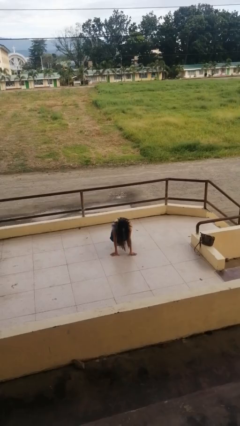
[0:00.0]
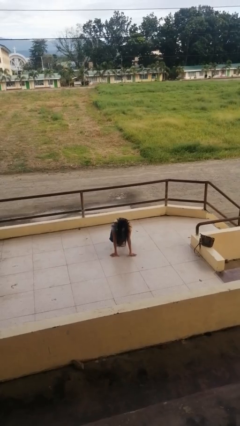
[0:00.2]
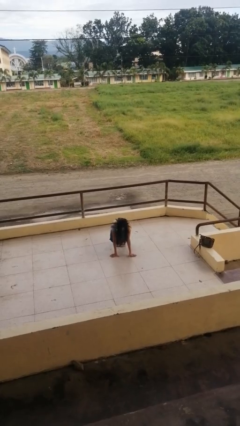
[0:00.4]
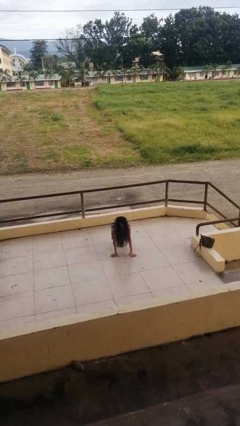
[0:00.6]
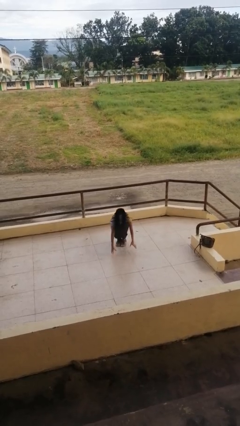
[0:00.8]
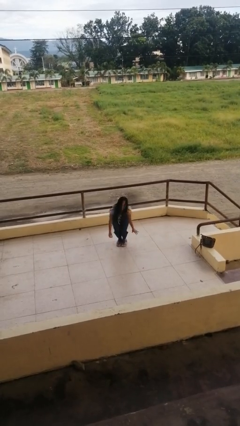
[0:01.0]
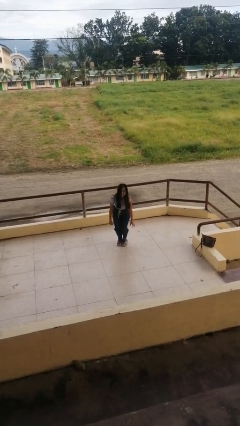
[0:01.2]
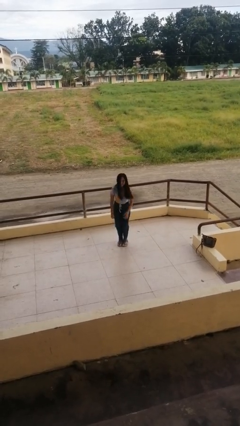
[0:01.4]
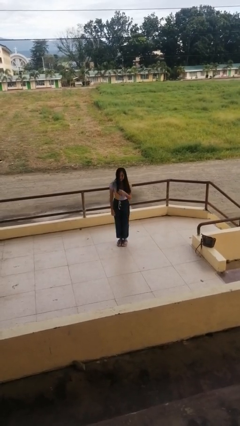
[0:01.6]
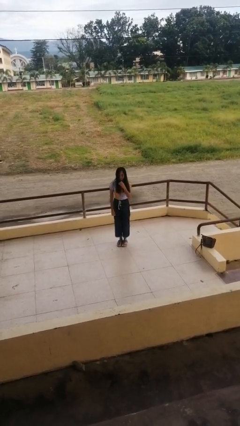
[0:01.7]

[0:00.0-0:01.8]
person stands up from floor

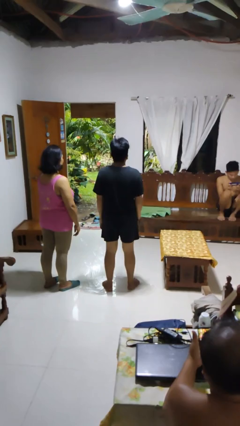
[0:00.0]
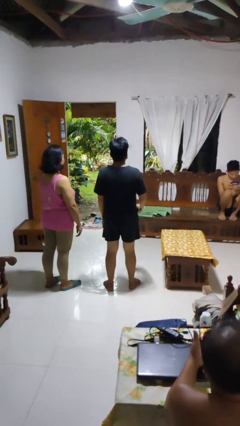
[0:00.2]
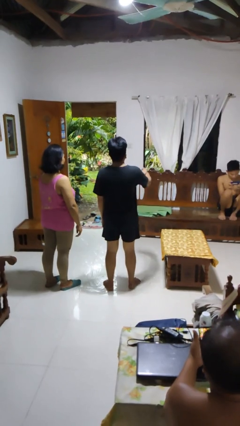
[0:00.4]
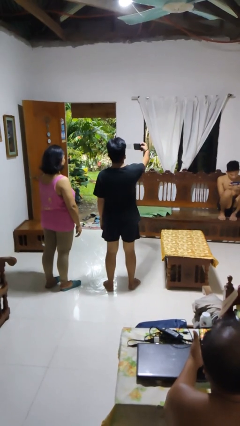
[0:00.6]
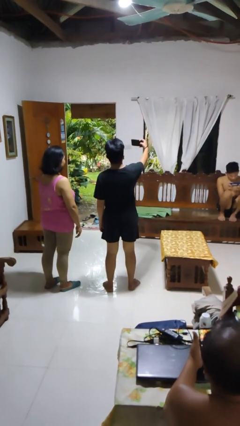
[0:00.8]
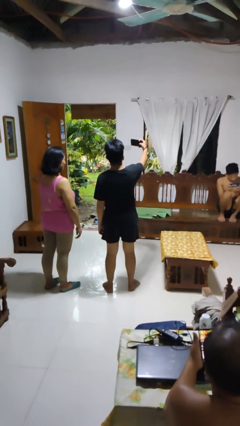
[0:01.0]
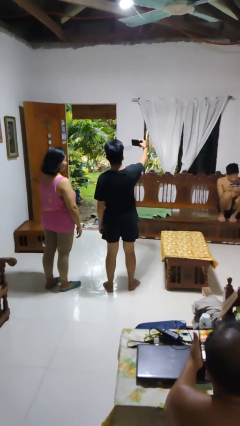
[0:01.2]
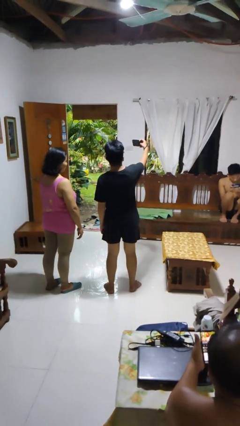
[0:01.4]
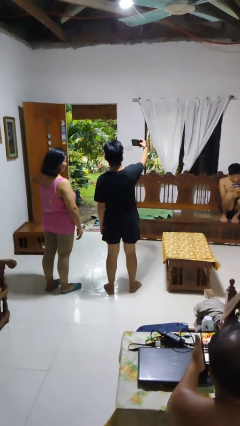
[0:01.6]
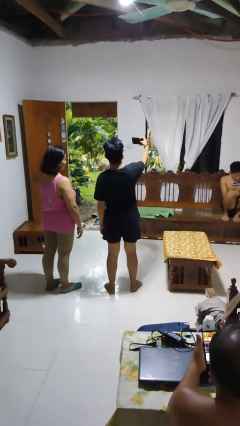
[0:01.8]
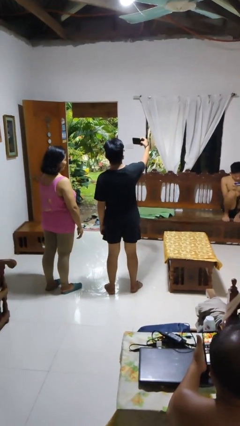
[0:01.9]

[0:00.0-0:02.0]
person takes selfie with person

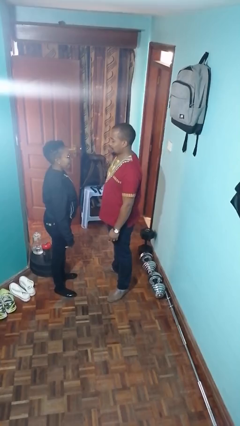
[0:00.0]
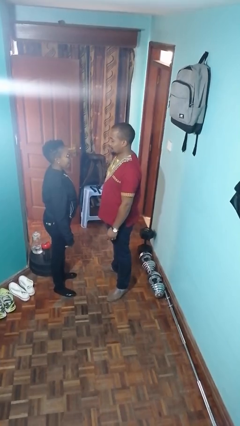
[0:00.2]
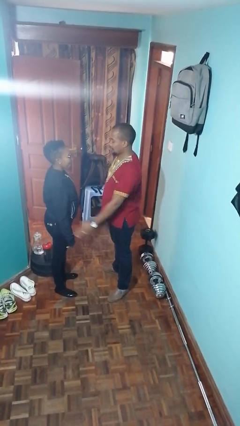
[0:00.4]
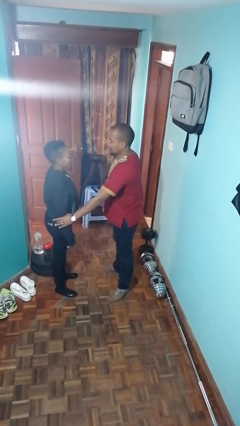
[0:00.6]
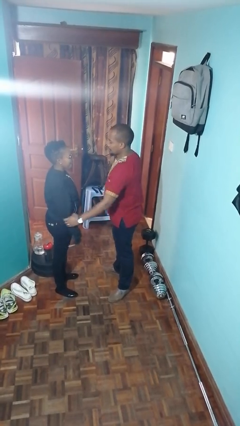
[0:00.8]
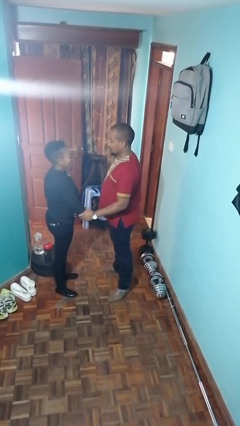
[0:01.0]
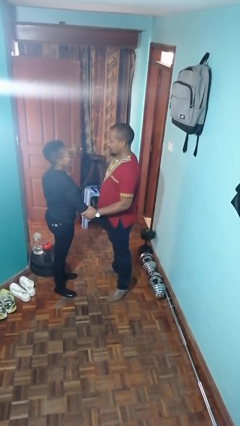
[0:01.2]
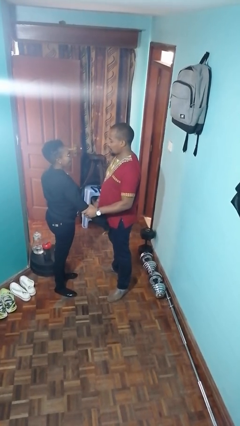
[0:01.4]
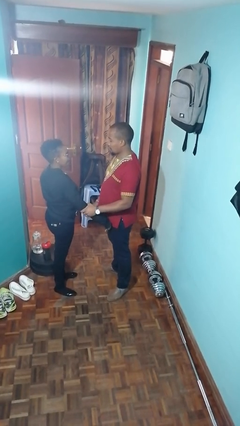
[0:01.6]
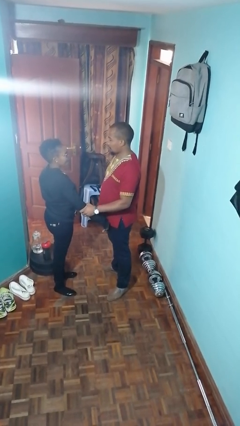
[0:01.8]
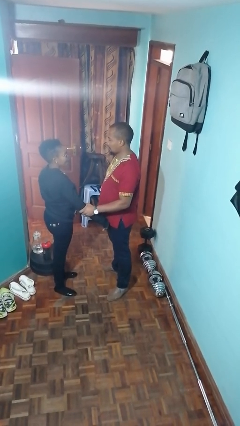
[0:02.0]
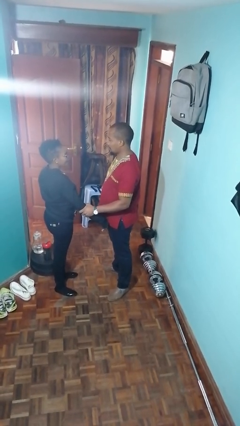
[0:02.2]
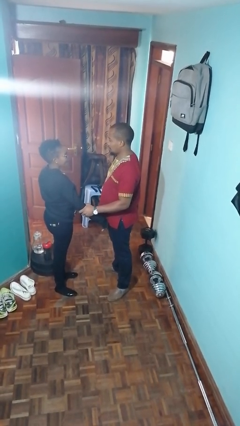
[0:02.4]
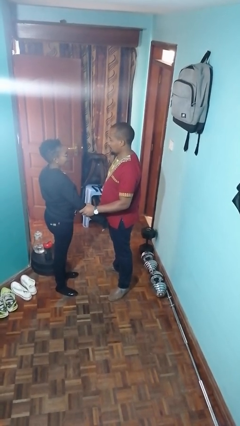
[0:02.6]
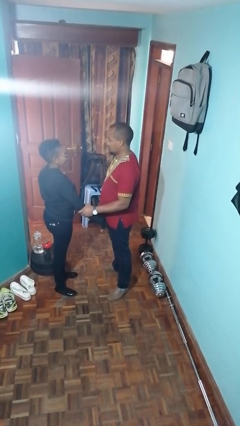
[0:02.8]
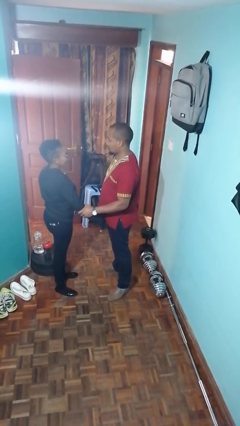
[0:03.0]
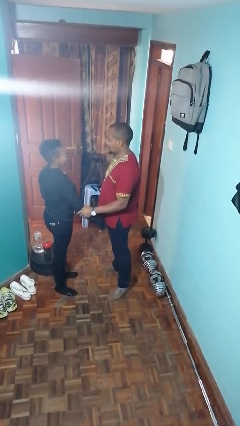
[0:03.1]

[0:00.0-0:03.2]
person grabs person by forearm

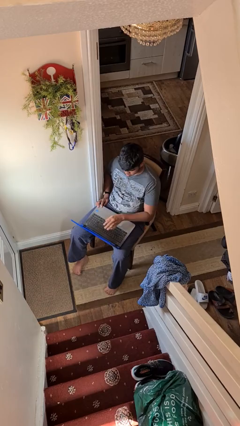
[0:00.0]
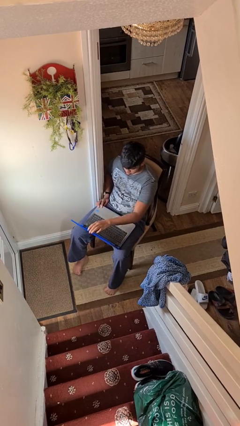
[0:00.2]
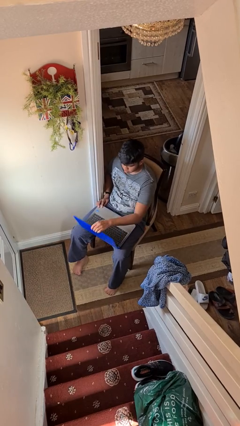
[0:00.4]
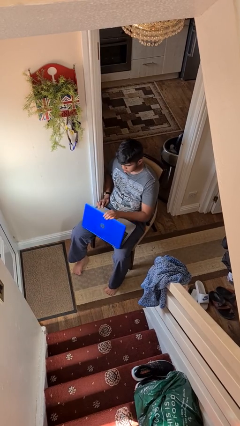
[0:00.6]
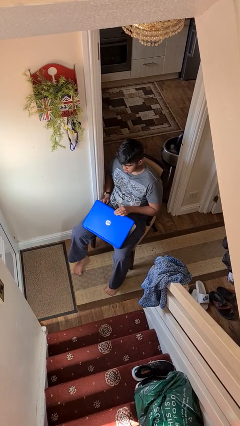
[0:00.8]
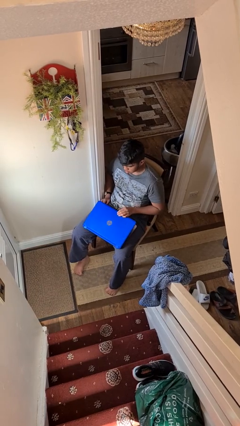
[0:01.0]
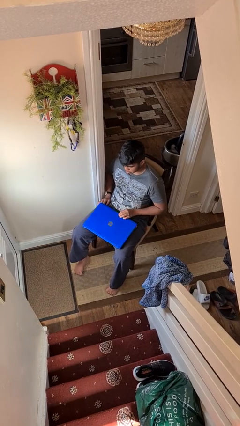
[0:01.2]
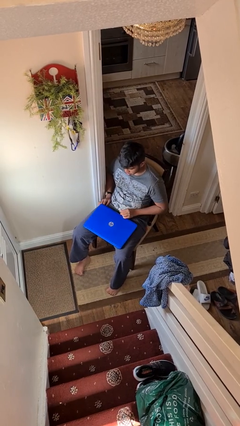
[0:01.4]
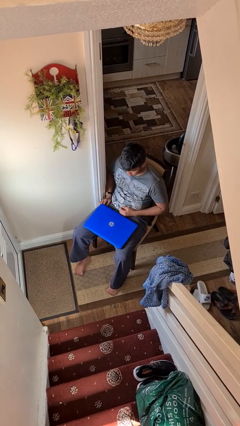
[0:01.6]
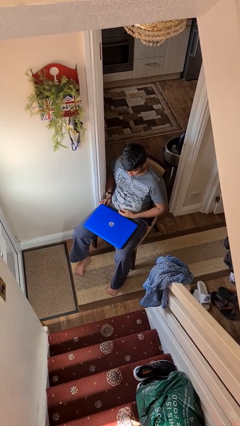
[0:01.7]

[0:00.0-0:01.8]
person closes laptop

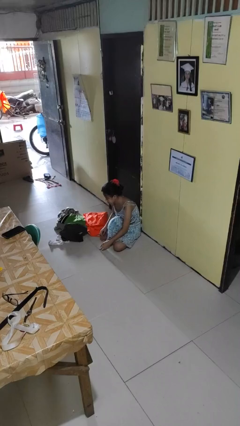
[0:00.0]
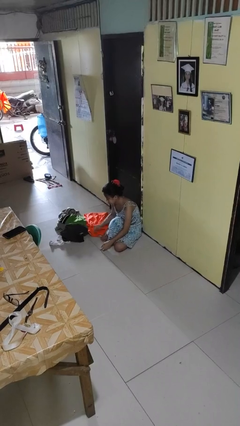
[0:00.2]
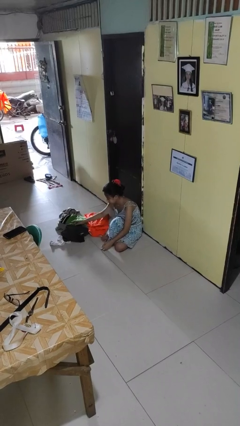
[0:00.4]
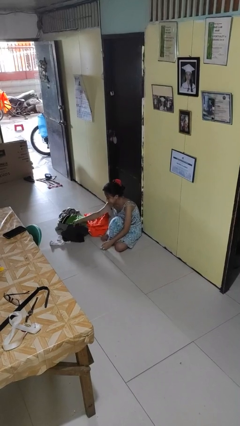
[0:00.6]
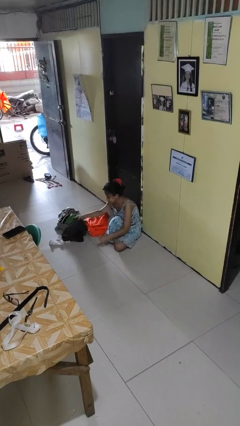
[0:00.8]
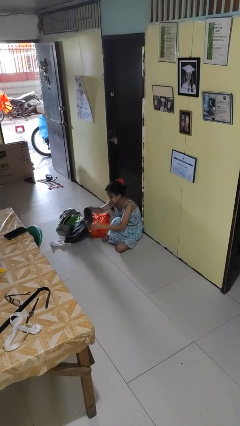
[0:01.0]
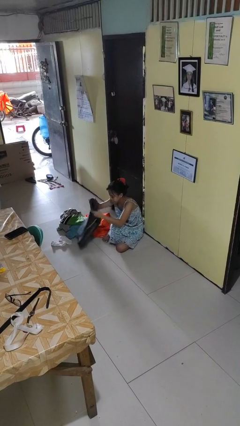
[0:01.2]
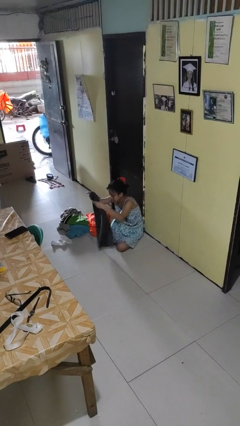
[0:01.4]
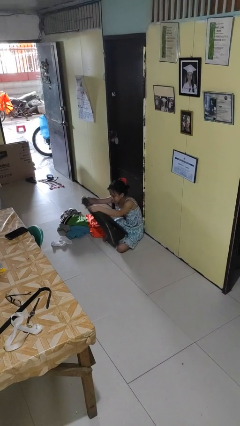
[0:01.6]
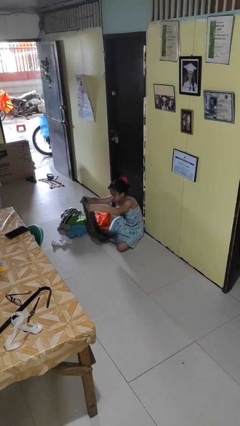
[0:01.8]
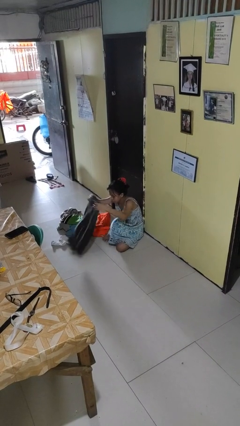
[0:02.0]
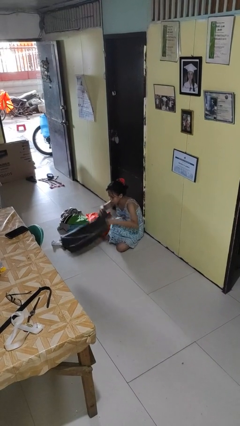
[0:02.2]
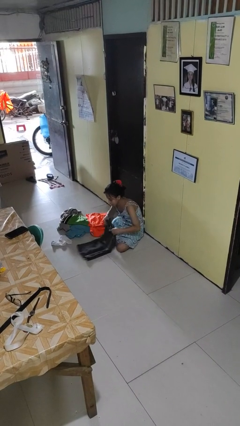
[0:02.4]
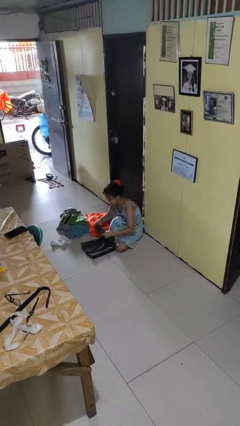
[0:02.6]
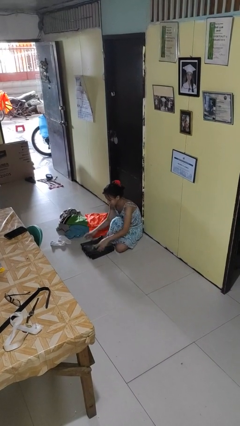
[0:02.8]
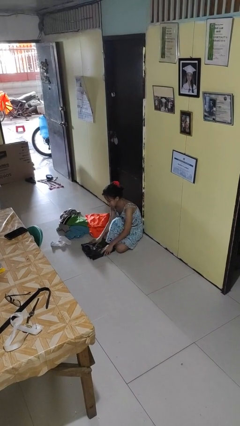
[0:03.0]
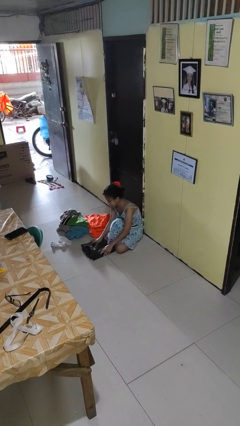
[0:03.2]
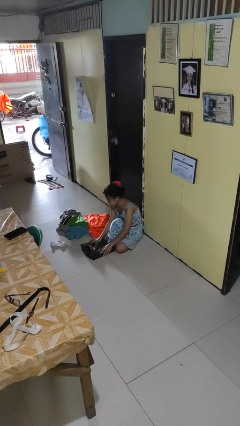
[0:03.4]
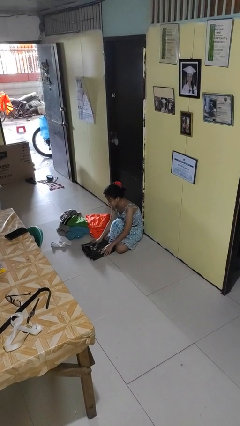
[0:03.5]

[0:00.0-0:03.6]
person folds pants

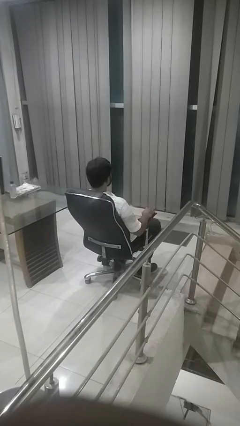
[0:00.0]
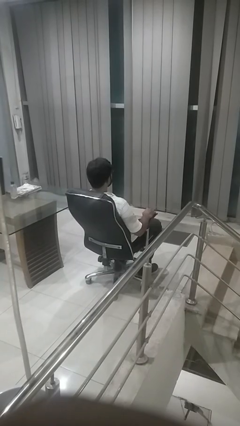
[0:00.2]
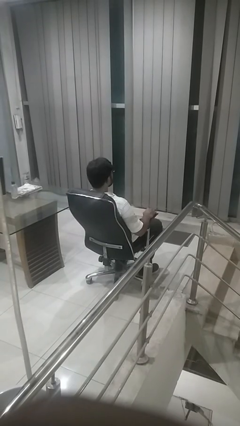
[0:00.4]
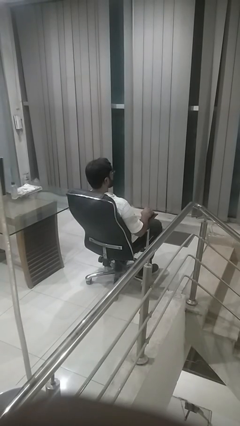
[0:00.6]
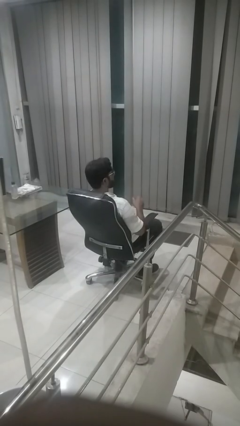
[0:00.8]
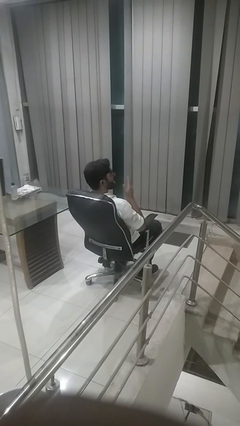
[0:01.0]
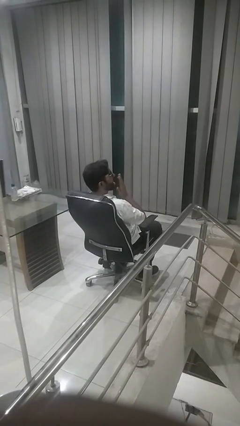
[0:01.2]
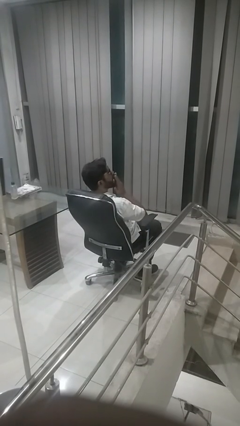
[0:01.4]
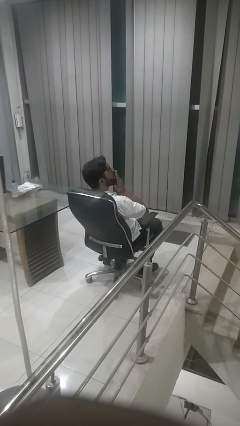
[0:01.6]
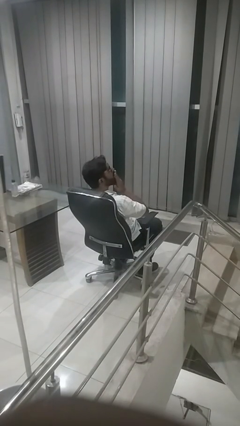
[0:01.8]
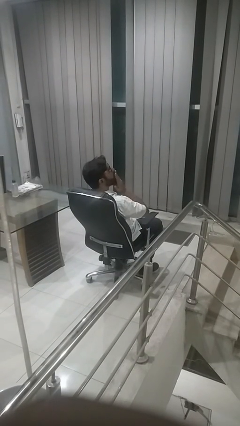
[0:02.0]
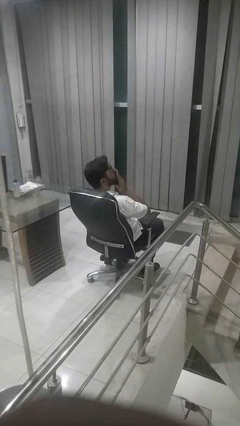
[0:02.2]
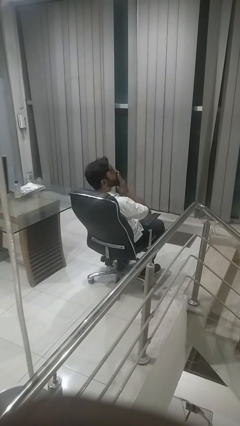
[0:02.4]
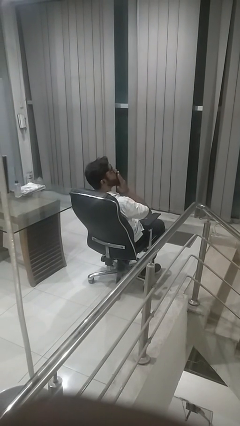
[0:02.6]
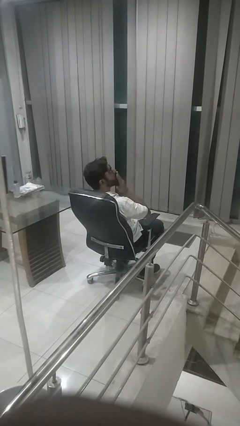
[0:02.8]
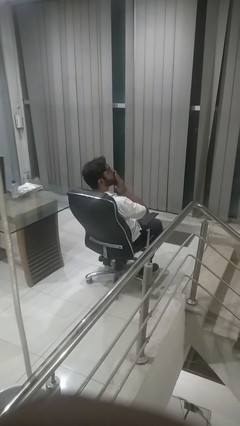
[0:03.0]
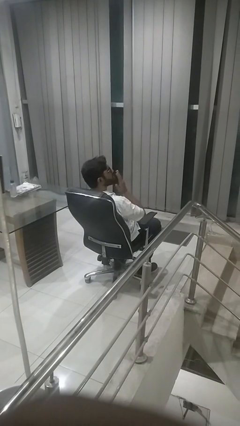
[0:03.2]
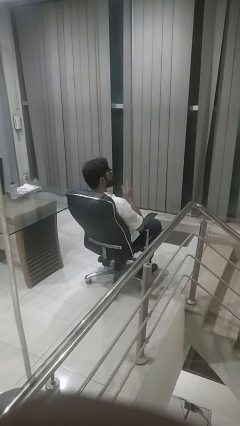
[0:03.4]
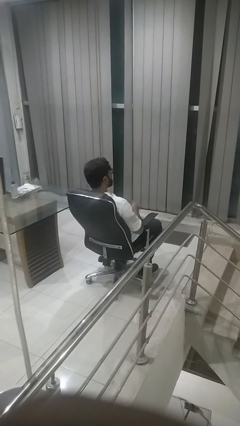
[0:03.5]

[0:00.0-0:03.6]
person yawns

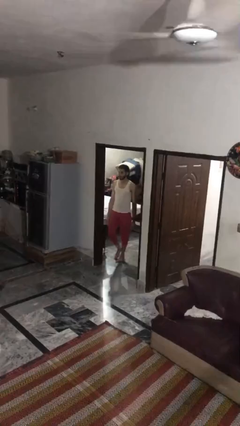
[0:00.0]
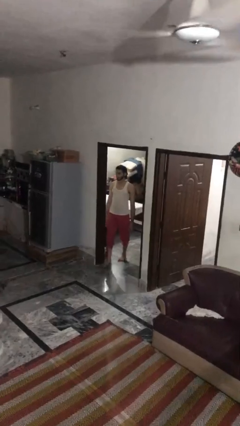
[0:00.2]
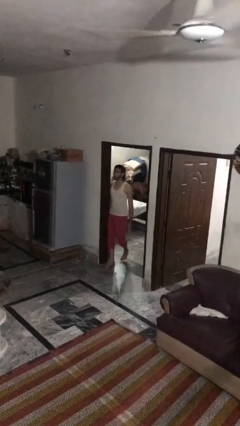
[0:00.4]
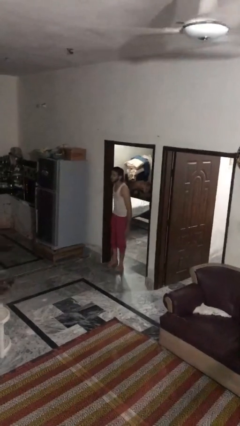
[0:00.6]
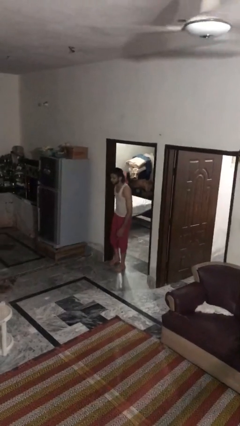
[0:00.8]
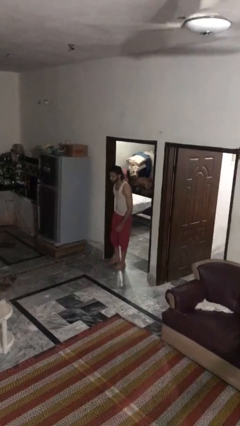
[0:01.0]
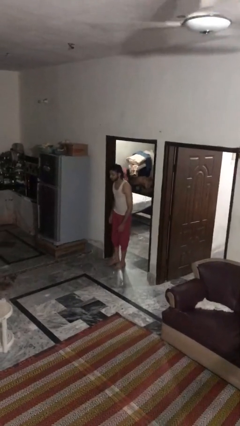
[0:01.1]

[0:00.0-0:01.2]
person bumps into wall
